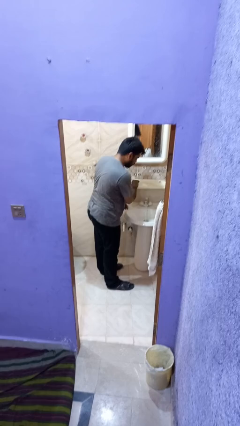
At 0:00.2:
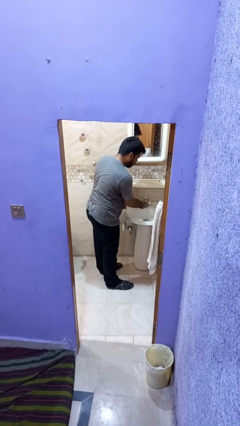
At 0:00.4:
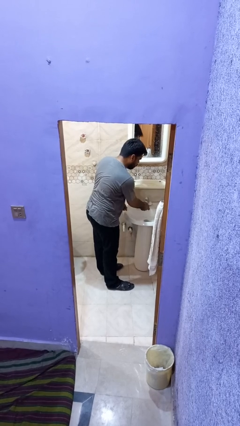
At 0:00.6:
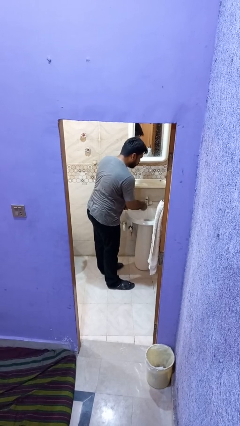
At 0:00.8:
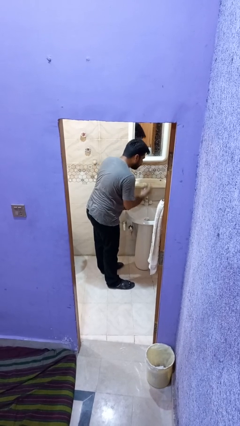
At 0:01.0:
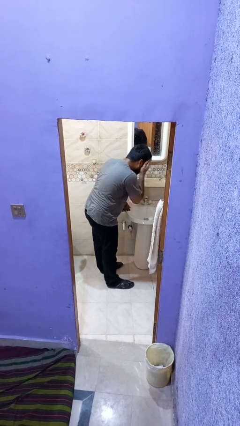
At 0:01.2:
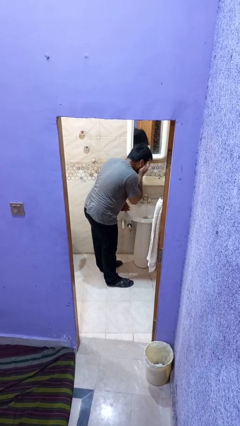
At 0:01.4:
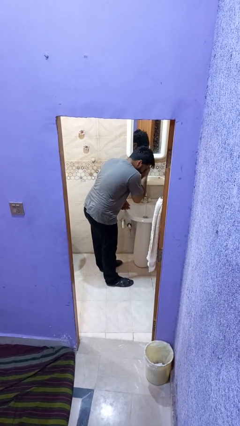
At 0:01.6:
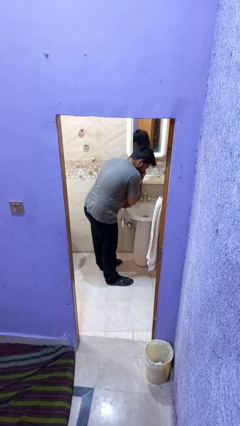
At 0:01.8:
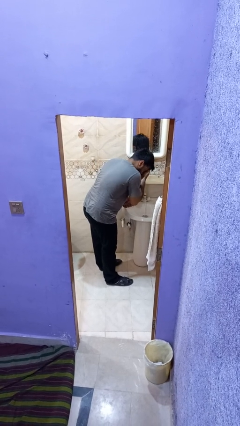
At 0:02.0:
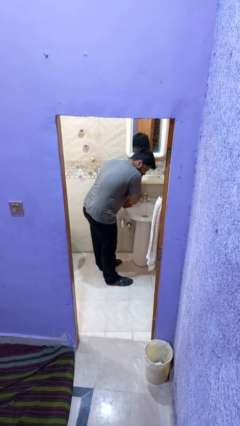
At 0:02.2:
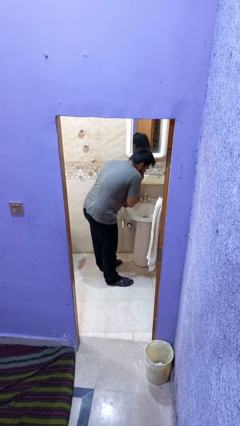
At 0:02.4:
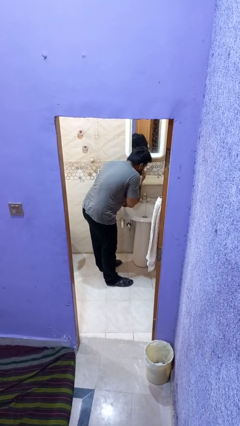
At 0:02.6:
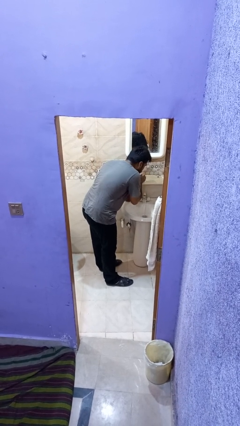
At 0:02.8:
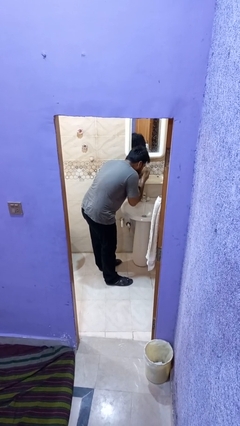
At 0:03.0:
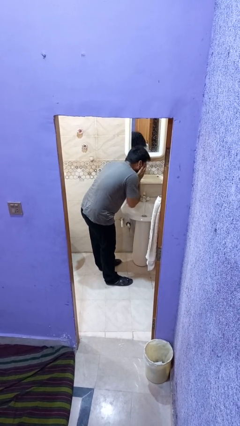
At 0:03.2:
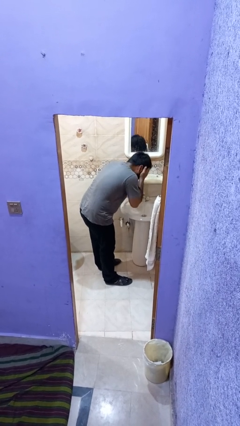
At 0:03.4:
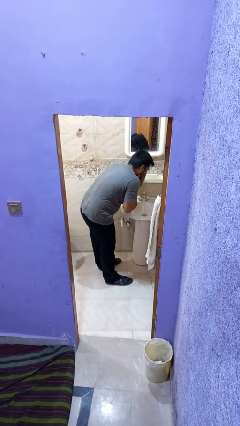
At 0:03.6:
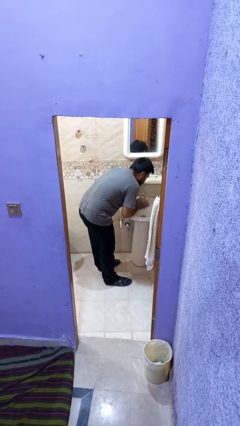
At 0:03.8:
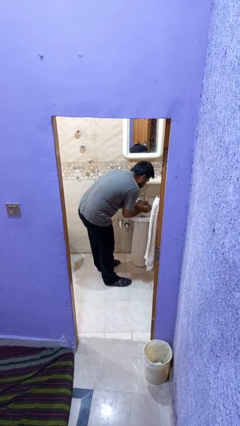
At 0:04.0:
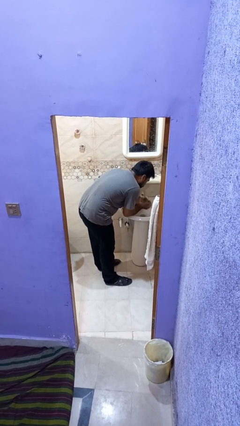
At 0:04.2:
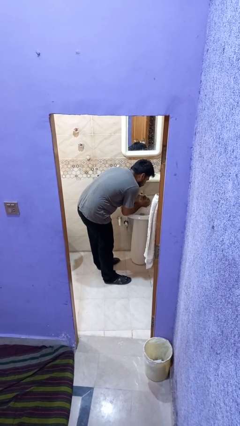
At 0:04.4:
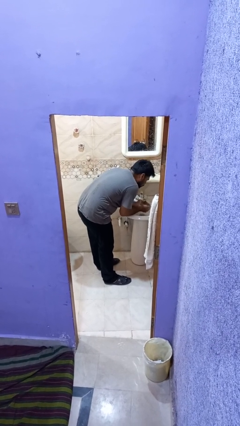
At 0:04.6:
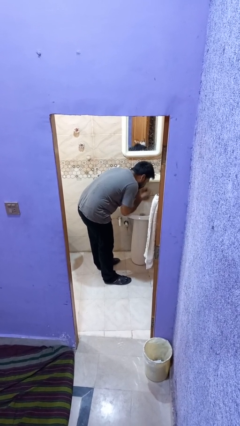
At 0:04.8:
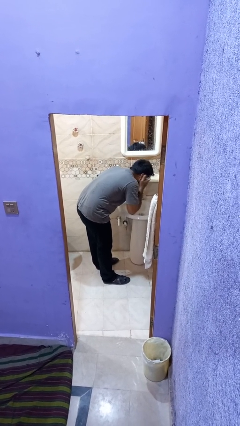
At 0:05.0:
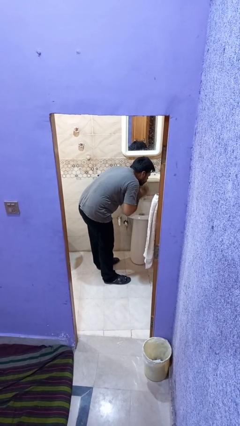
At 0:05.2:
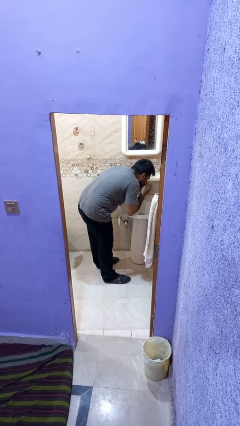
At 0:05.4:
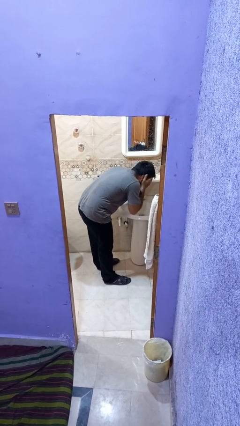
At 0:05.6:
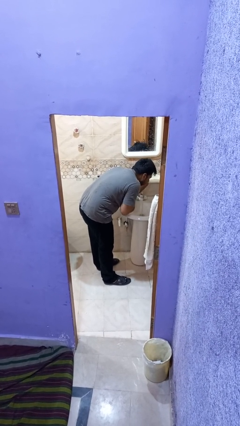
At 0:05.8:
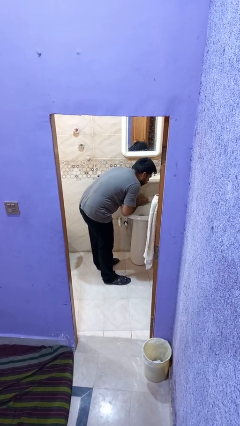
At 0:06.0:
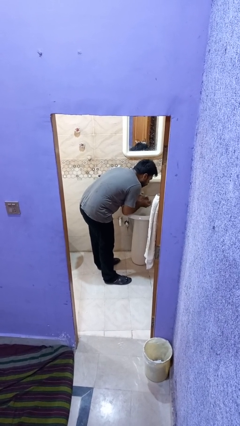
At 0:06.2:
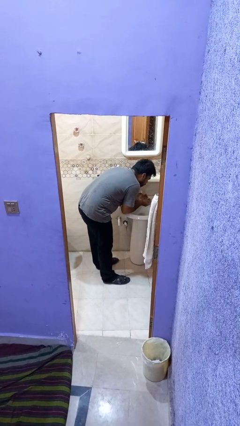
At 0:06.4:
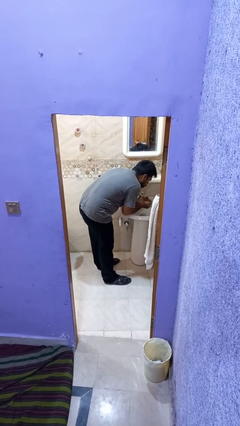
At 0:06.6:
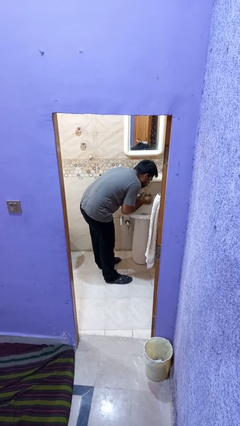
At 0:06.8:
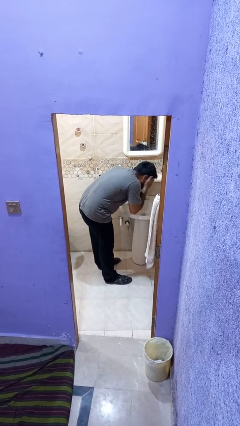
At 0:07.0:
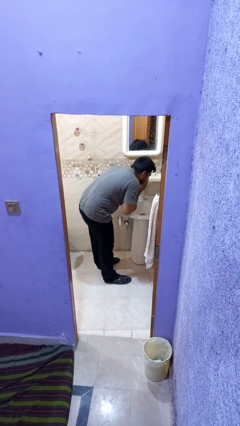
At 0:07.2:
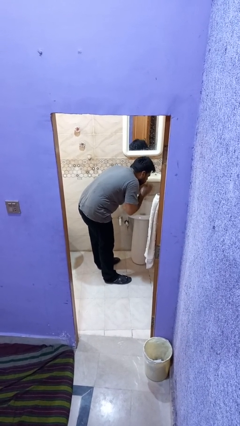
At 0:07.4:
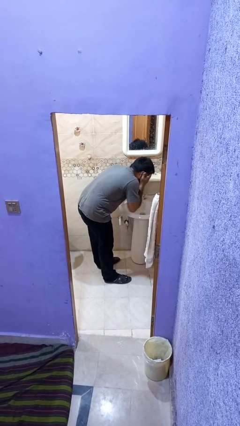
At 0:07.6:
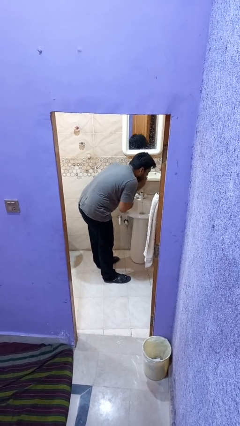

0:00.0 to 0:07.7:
person washes face

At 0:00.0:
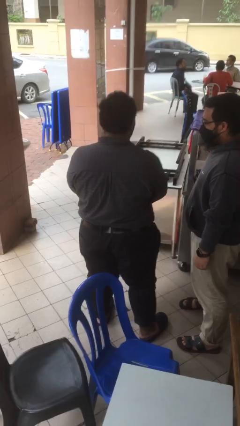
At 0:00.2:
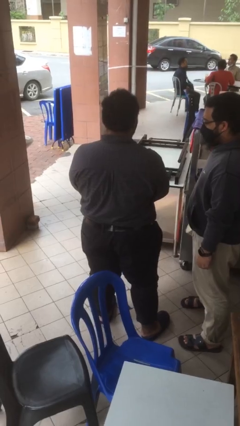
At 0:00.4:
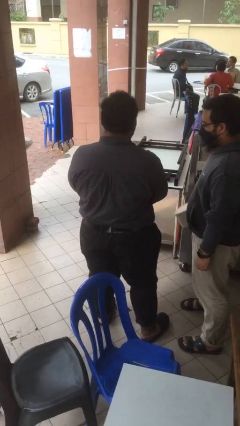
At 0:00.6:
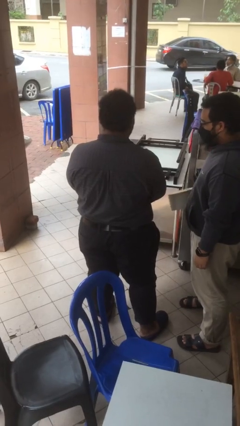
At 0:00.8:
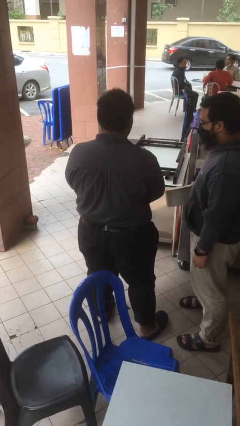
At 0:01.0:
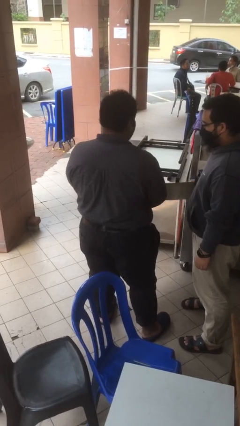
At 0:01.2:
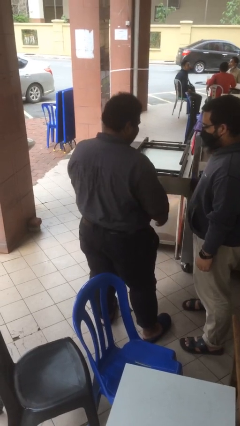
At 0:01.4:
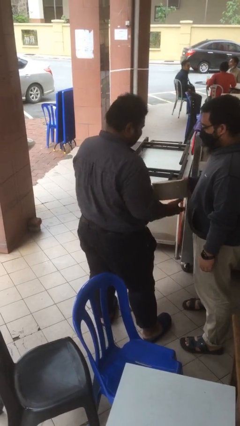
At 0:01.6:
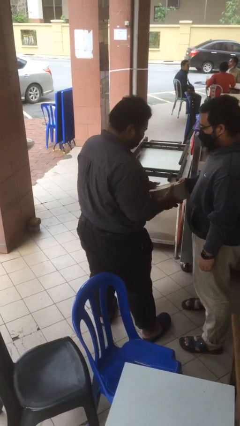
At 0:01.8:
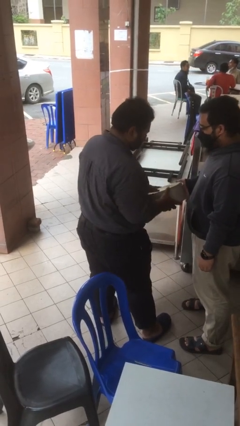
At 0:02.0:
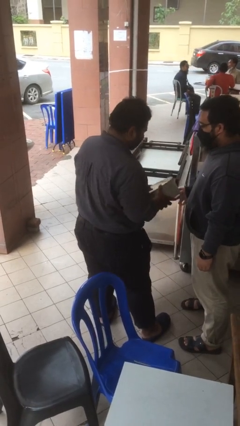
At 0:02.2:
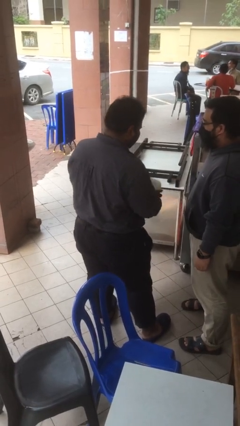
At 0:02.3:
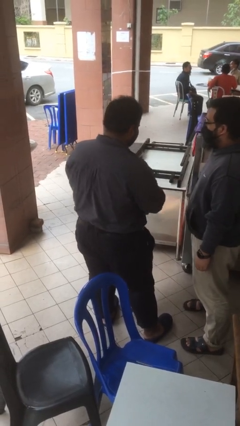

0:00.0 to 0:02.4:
person transfers object to person

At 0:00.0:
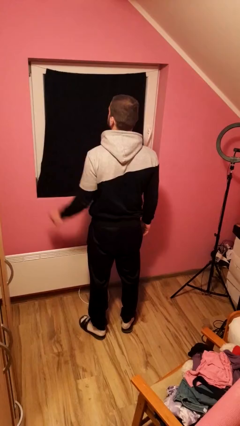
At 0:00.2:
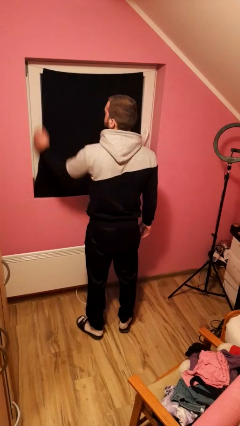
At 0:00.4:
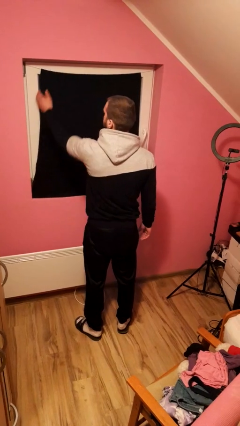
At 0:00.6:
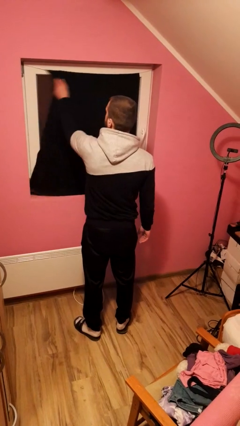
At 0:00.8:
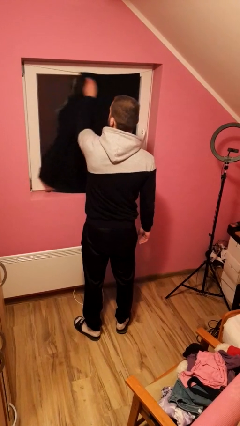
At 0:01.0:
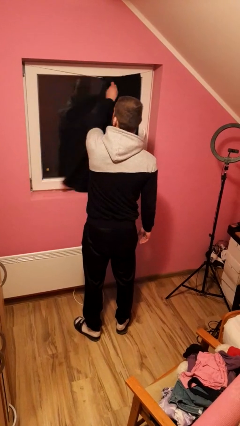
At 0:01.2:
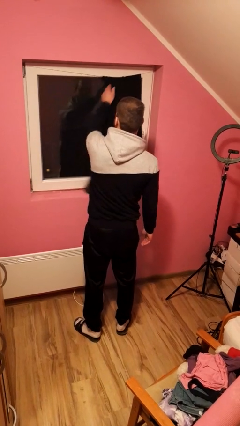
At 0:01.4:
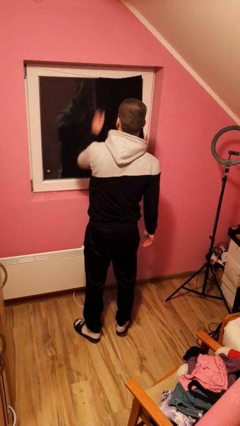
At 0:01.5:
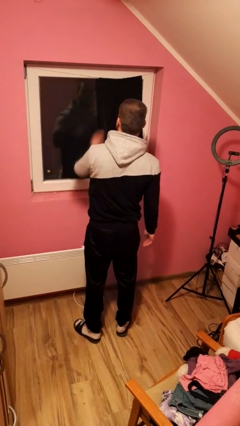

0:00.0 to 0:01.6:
person opens curtains

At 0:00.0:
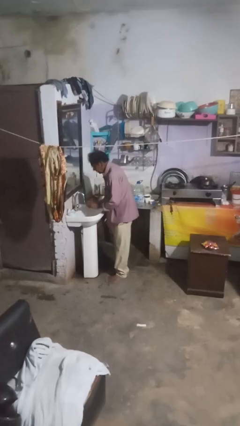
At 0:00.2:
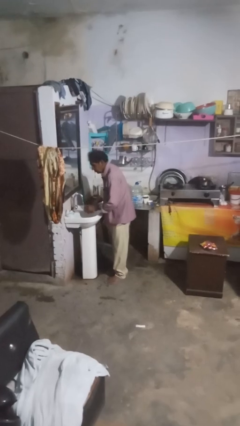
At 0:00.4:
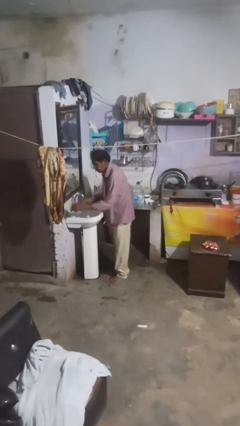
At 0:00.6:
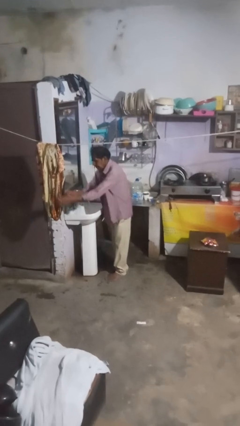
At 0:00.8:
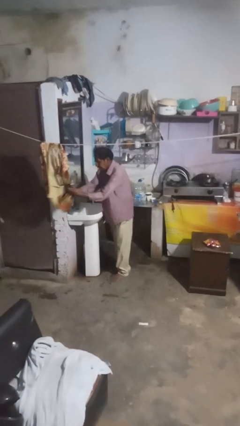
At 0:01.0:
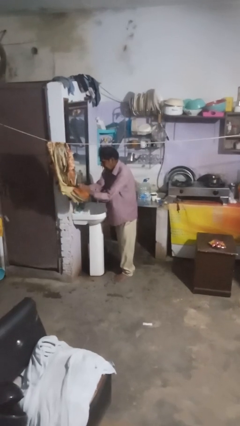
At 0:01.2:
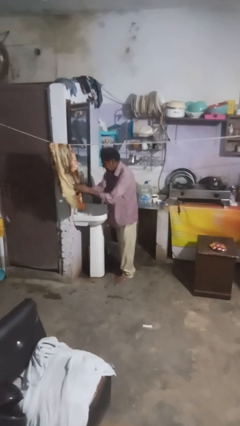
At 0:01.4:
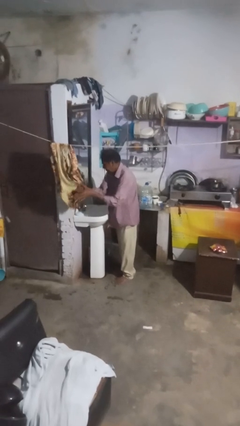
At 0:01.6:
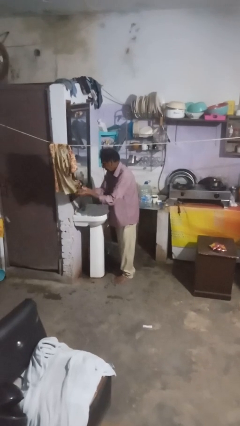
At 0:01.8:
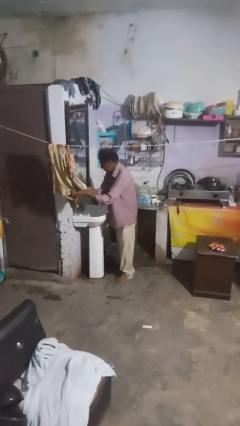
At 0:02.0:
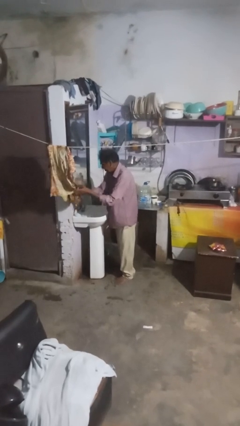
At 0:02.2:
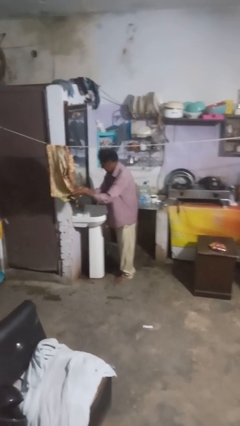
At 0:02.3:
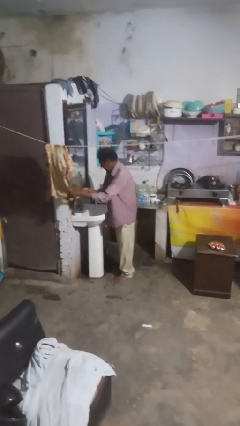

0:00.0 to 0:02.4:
person dries hands with towel

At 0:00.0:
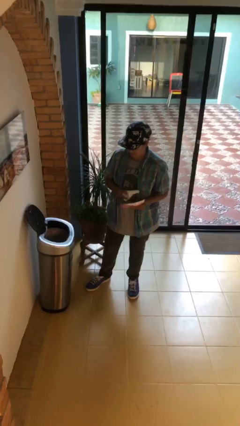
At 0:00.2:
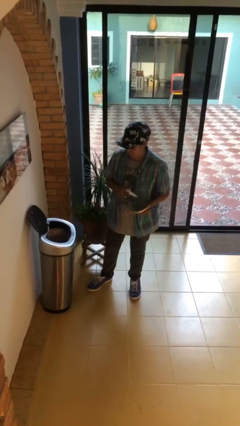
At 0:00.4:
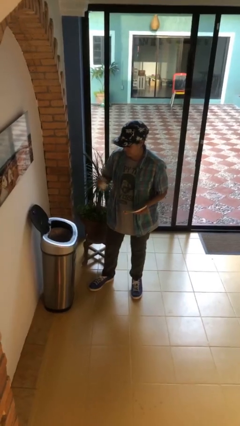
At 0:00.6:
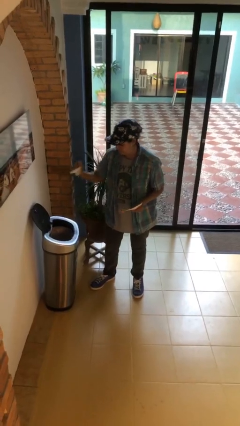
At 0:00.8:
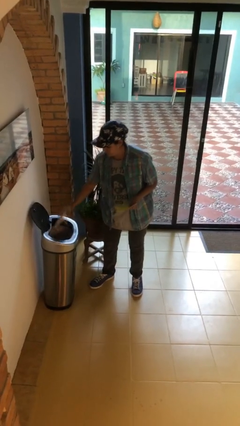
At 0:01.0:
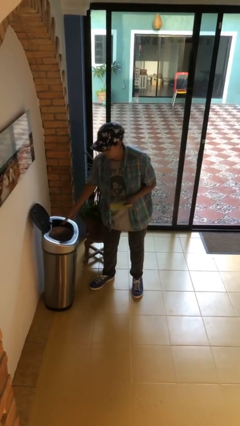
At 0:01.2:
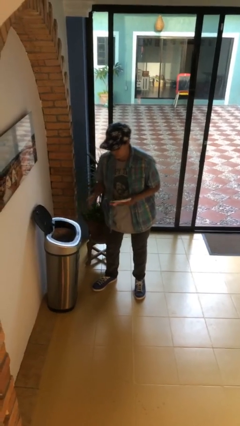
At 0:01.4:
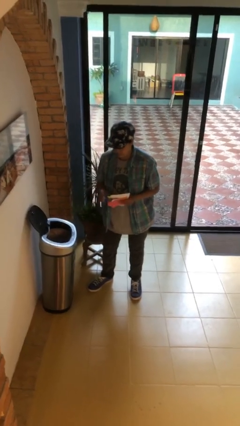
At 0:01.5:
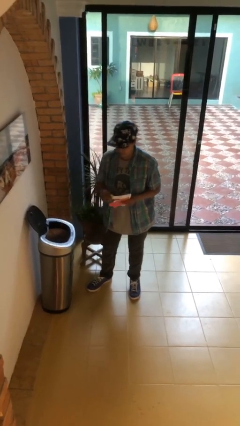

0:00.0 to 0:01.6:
person discards trash

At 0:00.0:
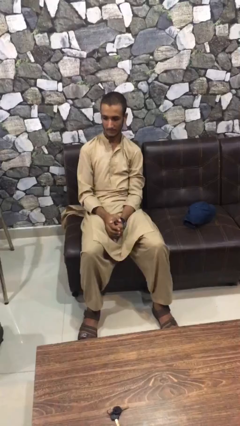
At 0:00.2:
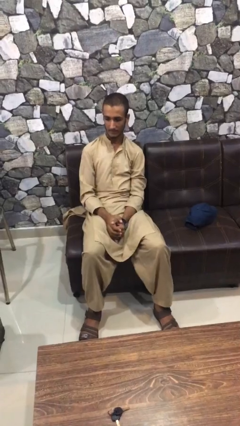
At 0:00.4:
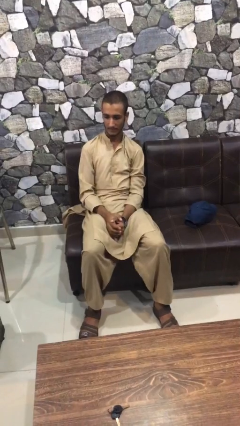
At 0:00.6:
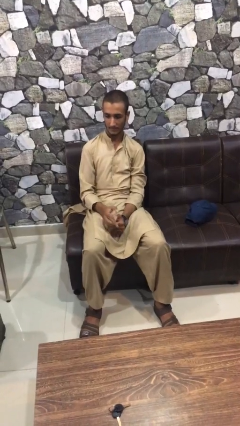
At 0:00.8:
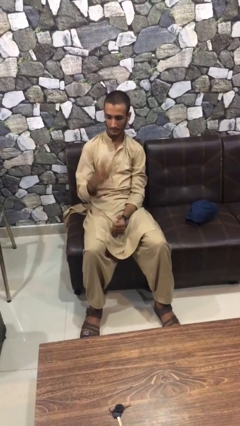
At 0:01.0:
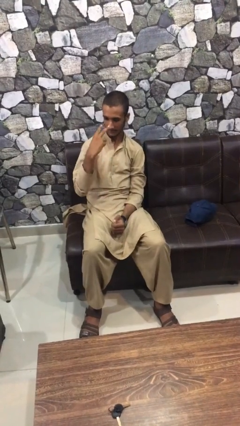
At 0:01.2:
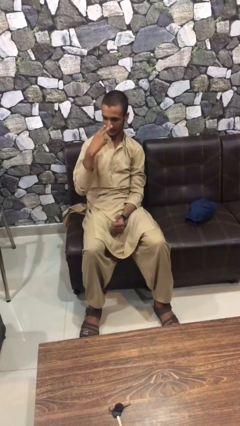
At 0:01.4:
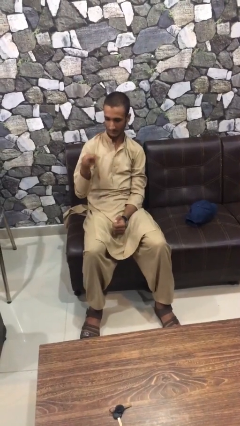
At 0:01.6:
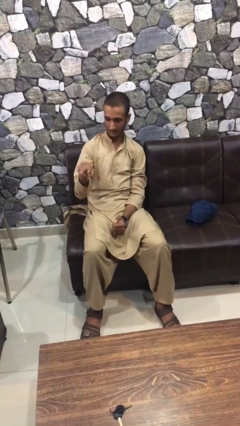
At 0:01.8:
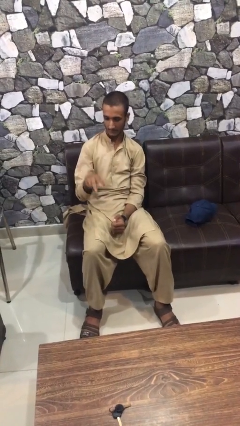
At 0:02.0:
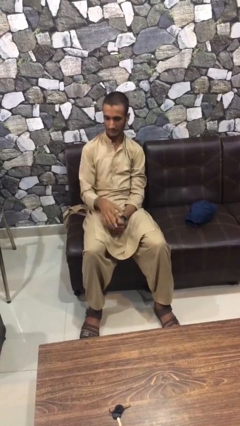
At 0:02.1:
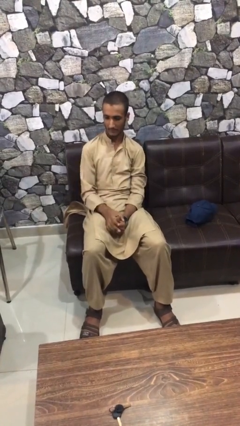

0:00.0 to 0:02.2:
person gestures watch closely
